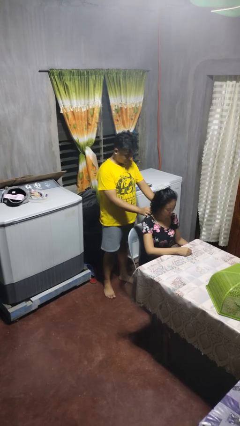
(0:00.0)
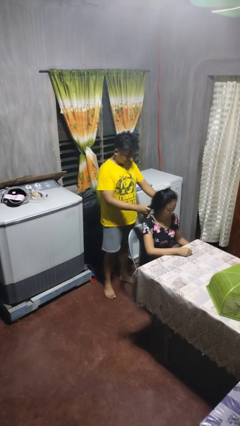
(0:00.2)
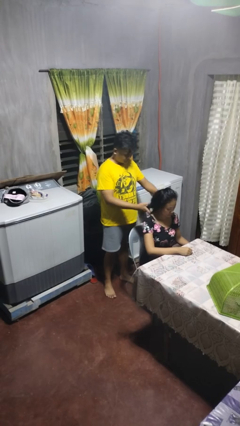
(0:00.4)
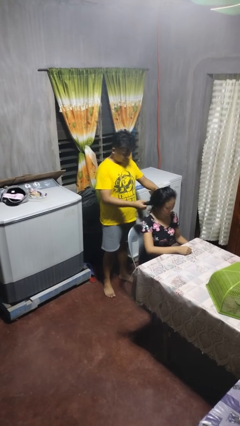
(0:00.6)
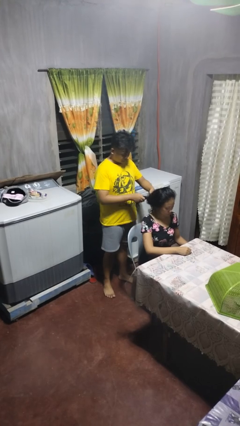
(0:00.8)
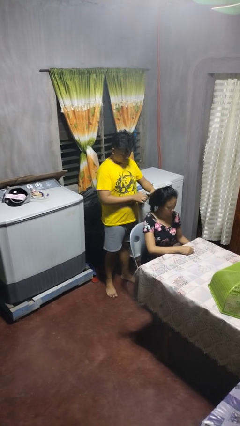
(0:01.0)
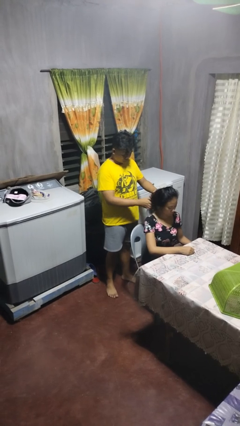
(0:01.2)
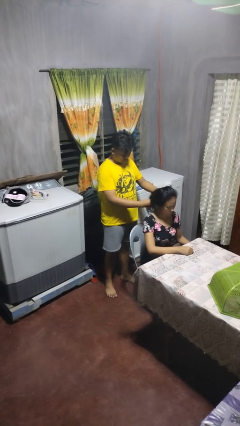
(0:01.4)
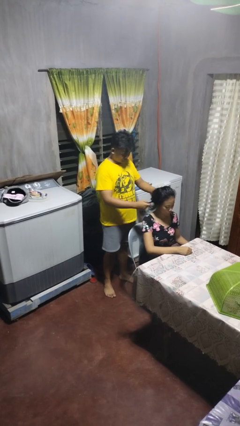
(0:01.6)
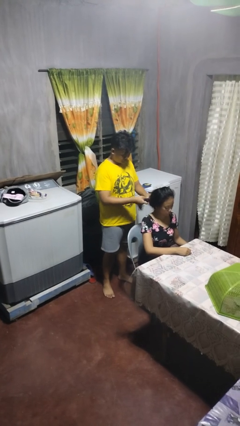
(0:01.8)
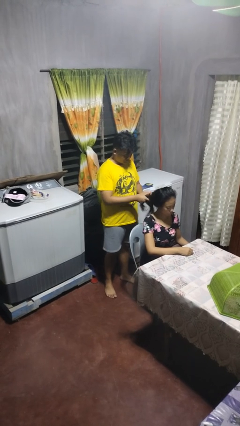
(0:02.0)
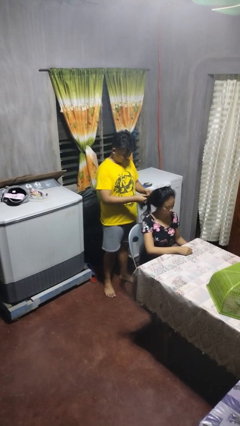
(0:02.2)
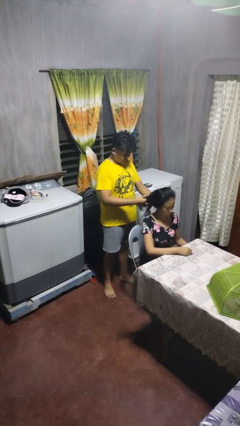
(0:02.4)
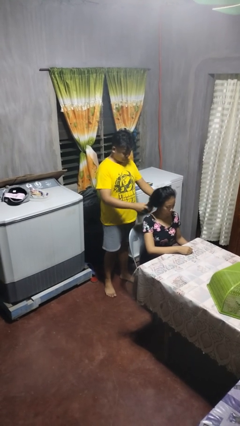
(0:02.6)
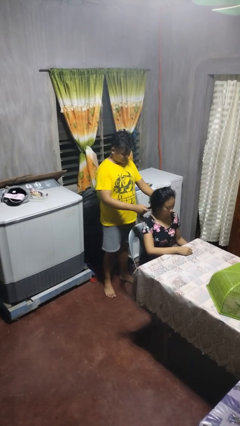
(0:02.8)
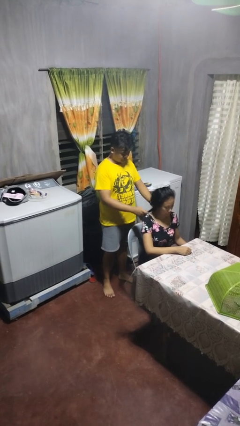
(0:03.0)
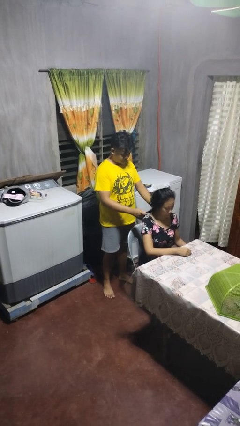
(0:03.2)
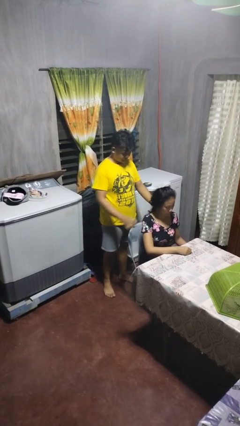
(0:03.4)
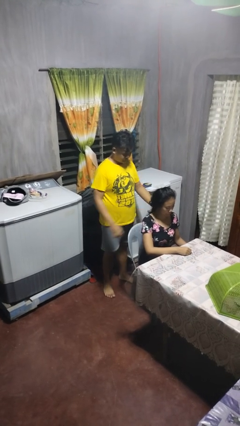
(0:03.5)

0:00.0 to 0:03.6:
person braids hair of person

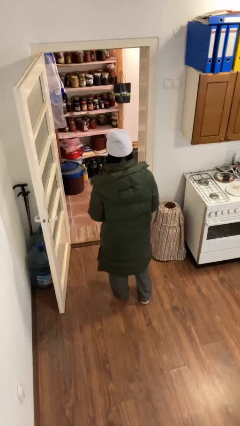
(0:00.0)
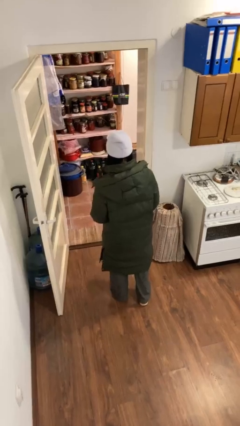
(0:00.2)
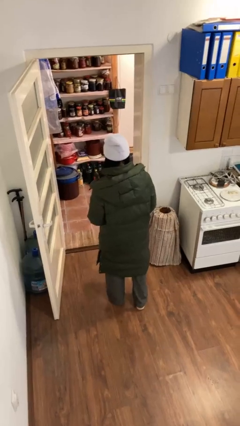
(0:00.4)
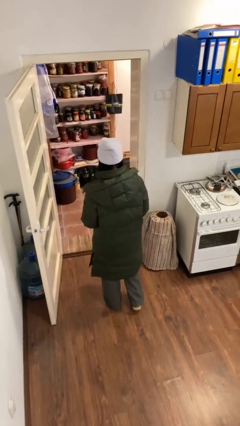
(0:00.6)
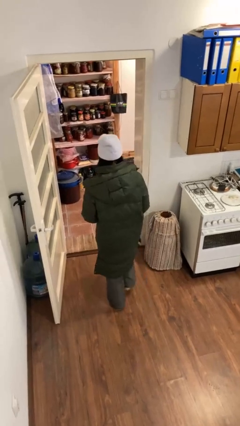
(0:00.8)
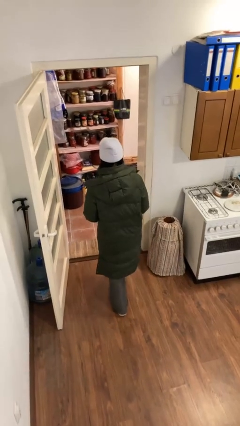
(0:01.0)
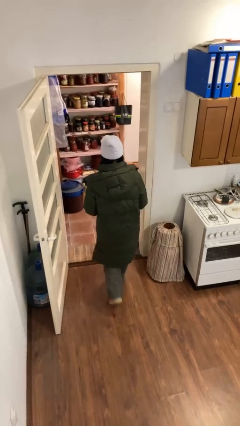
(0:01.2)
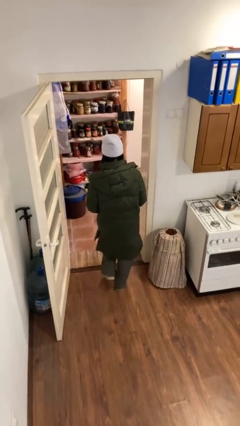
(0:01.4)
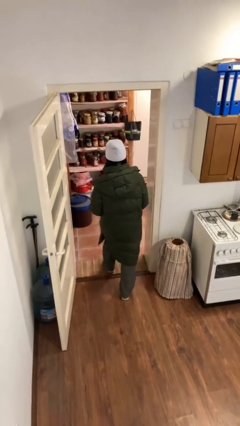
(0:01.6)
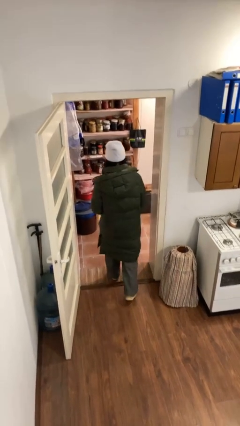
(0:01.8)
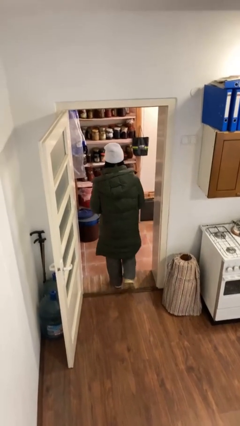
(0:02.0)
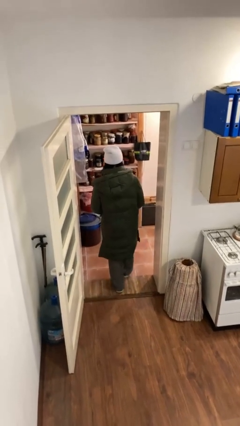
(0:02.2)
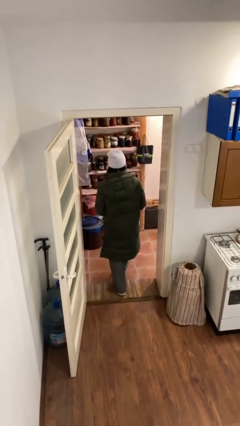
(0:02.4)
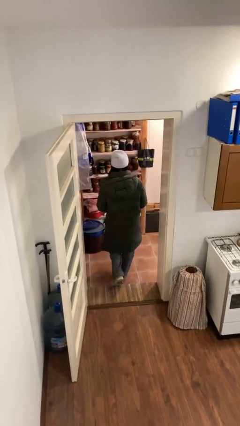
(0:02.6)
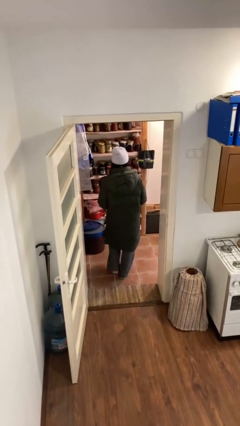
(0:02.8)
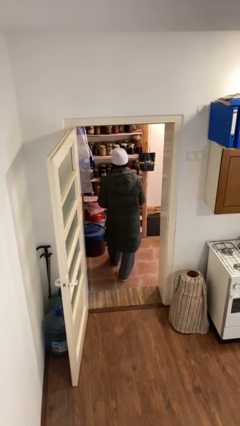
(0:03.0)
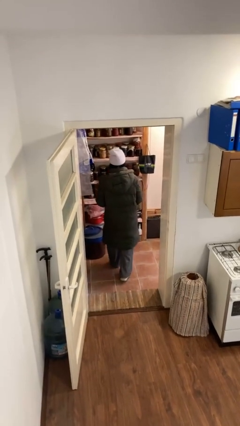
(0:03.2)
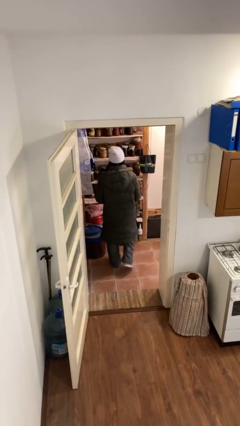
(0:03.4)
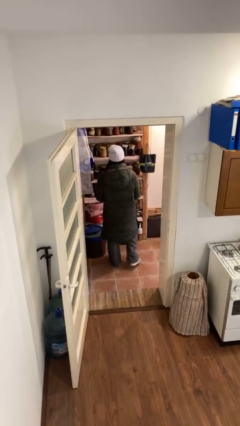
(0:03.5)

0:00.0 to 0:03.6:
person exits scene through structure

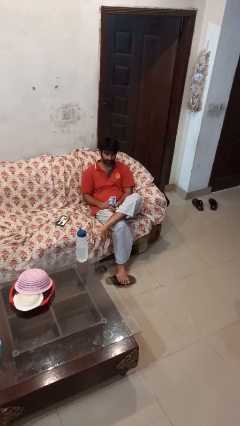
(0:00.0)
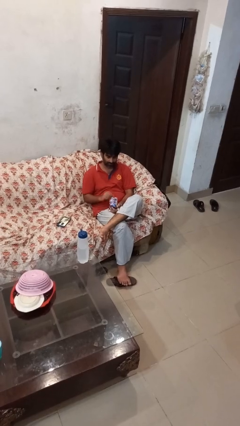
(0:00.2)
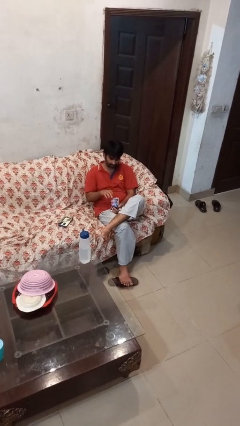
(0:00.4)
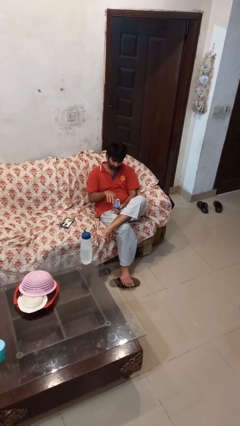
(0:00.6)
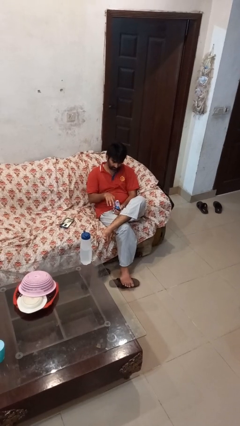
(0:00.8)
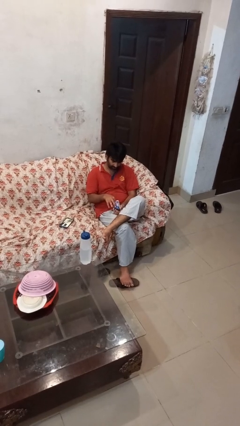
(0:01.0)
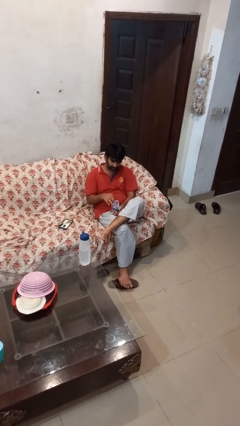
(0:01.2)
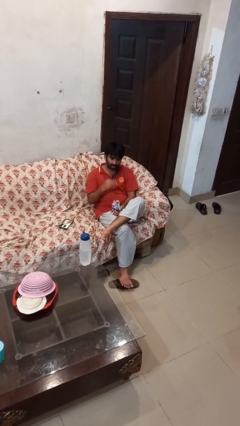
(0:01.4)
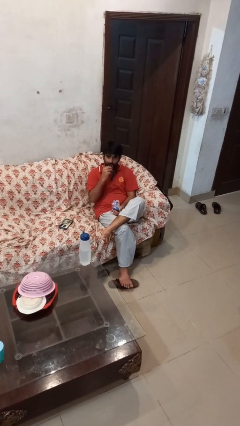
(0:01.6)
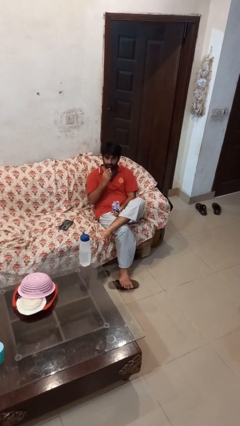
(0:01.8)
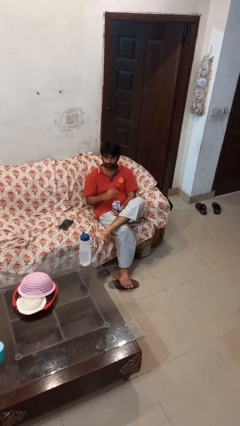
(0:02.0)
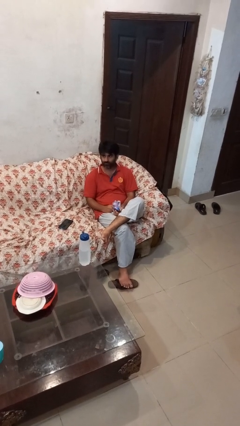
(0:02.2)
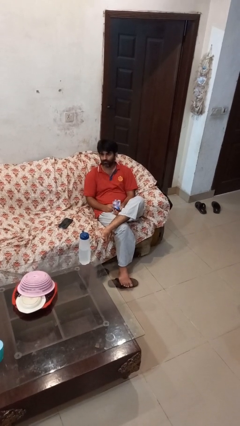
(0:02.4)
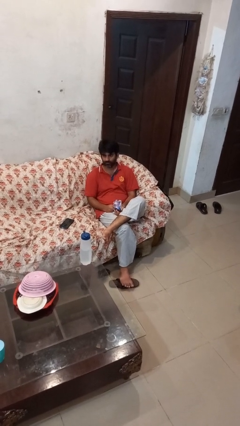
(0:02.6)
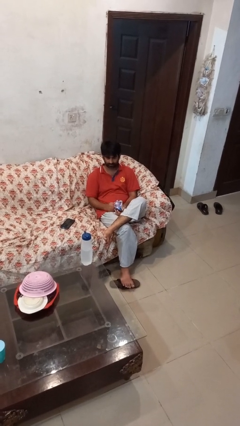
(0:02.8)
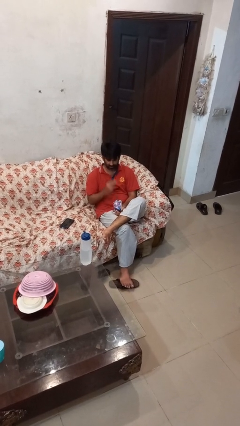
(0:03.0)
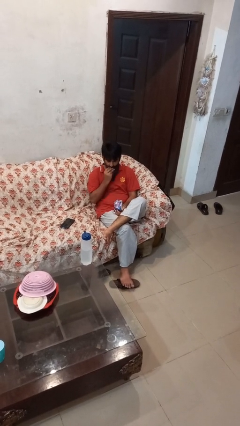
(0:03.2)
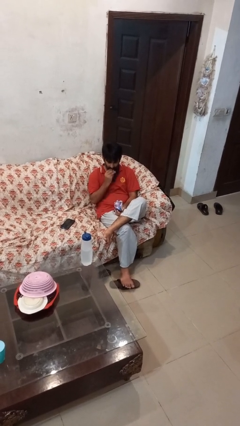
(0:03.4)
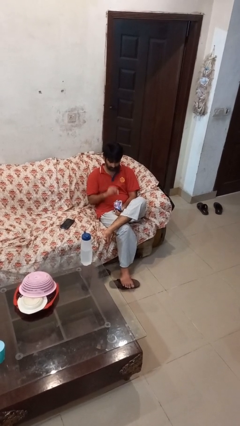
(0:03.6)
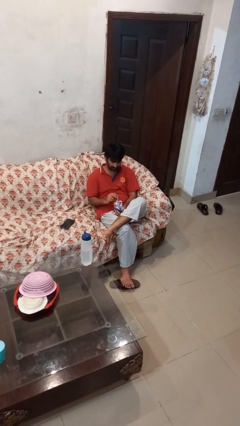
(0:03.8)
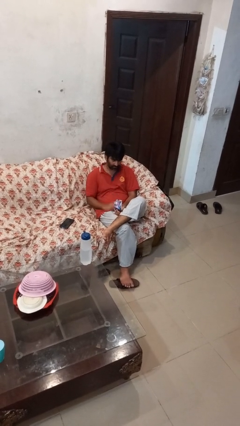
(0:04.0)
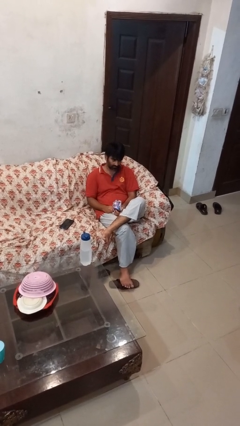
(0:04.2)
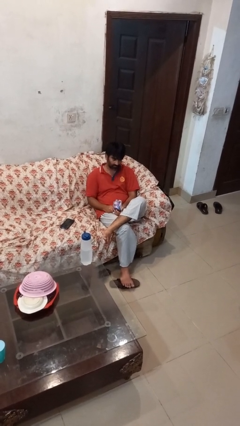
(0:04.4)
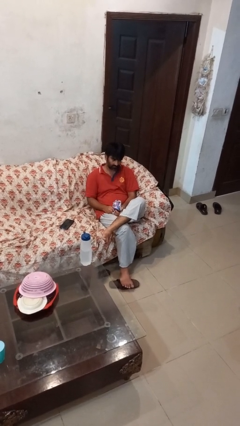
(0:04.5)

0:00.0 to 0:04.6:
person eats snack from bag

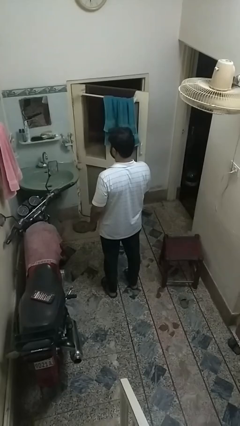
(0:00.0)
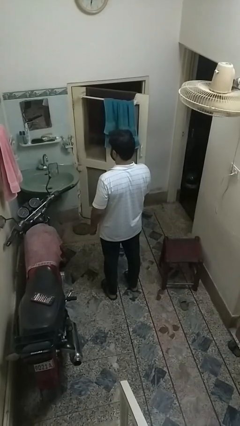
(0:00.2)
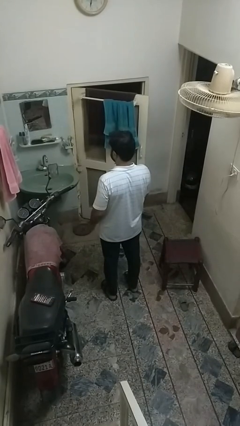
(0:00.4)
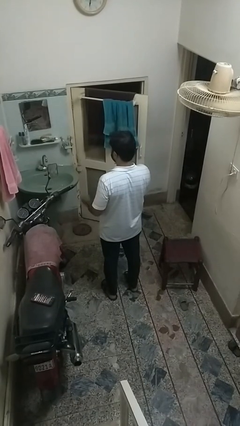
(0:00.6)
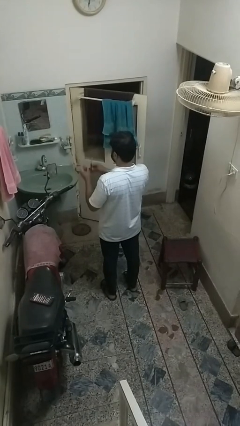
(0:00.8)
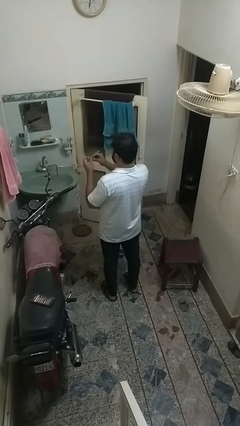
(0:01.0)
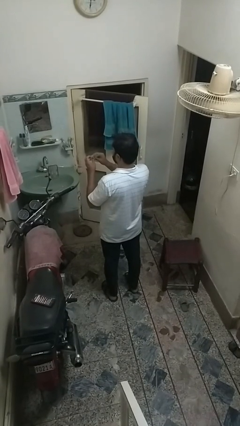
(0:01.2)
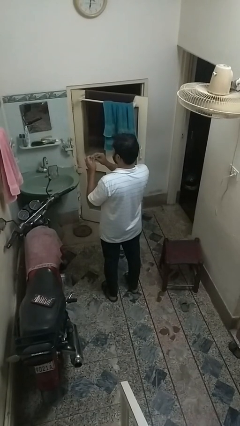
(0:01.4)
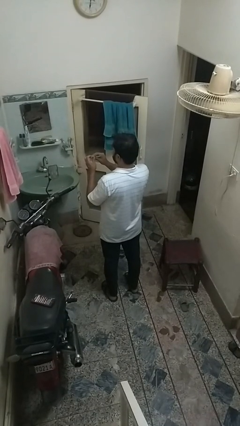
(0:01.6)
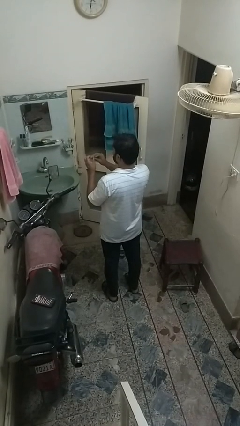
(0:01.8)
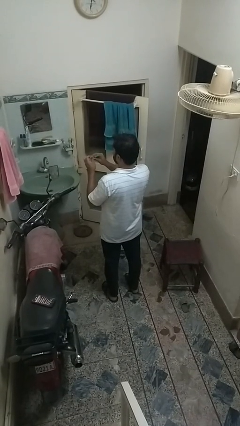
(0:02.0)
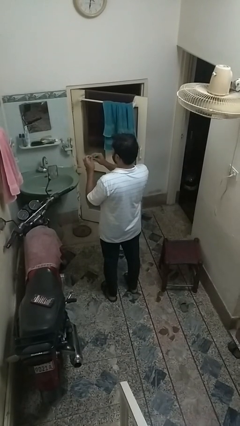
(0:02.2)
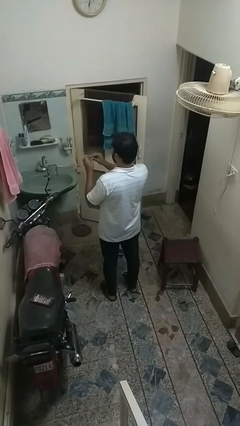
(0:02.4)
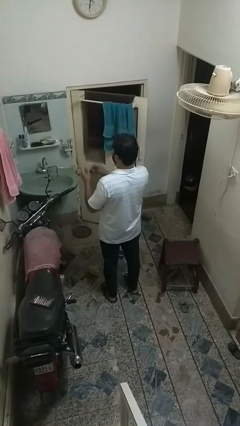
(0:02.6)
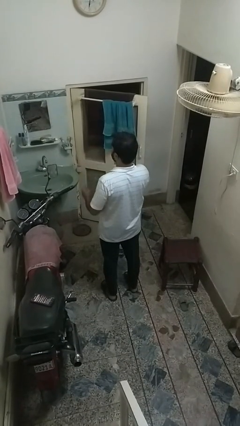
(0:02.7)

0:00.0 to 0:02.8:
person files fingernails

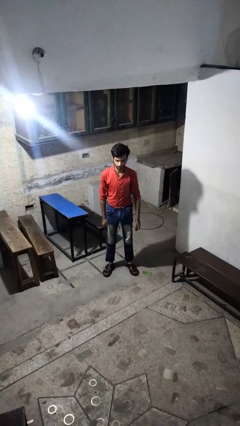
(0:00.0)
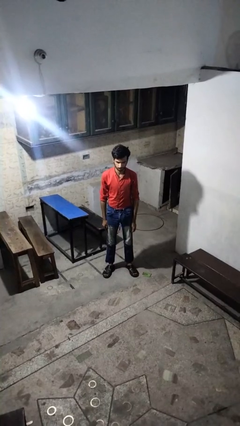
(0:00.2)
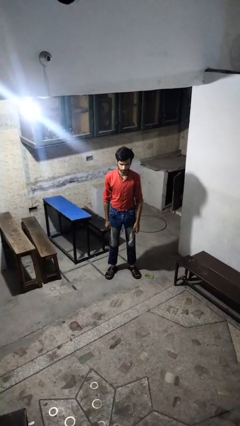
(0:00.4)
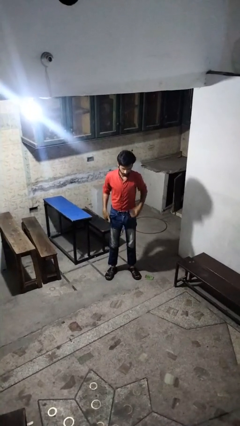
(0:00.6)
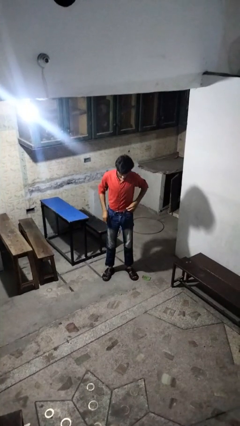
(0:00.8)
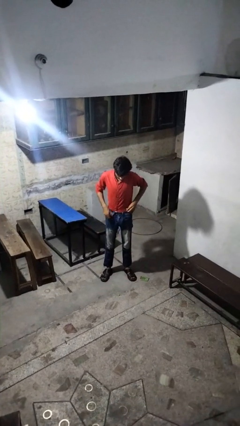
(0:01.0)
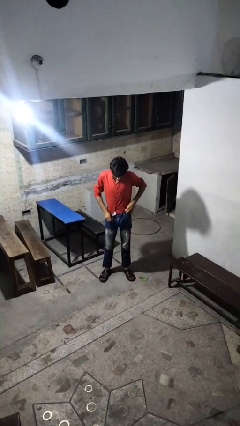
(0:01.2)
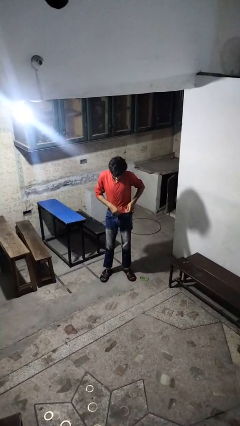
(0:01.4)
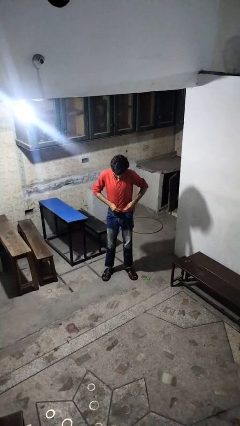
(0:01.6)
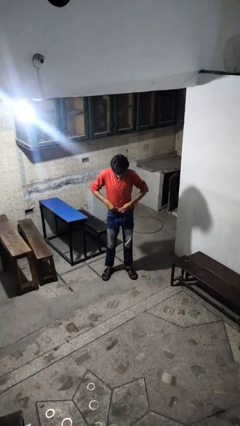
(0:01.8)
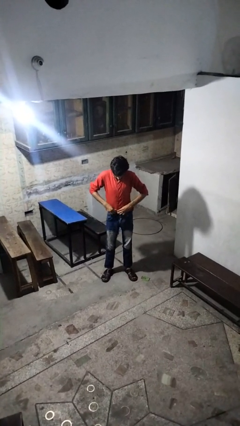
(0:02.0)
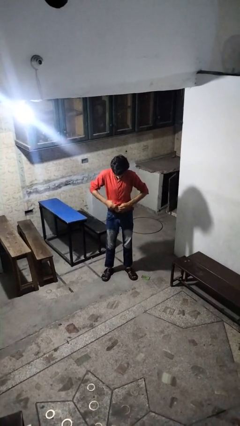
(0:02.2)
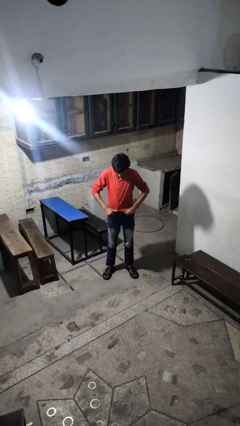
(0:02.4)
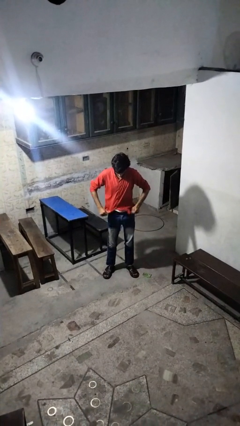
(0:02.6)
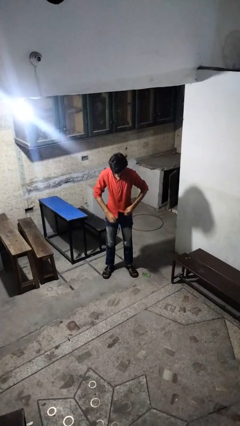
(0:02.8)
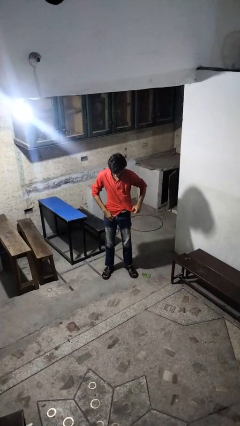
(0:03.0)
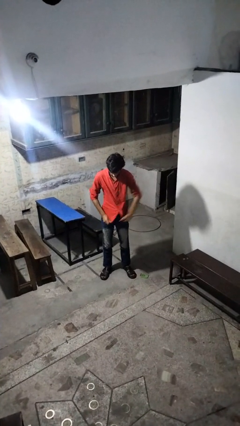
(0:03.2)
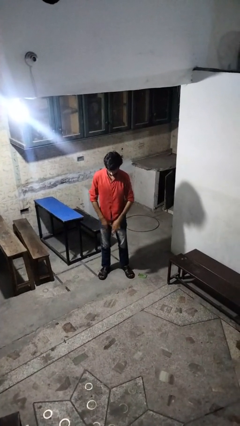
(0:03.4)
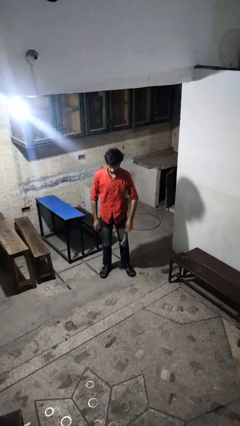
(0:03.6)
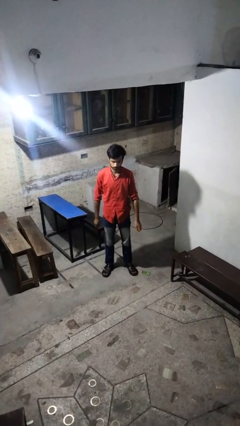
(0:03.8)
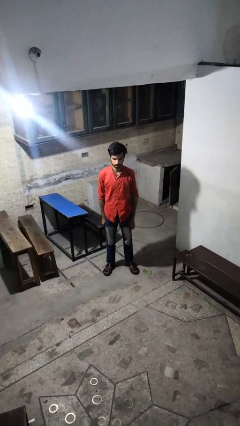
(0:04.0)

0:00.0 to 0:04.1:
person untucks shirt
